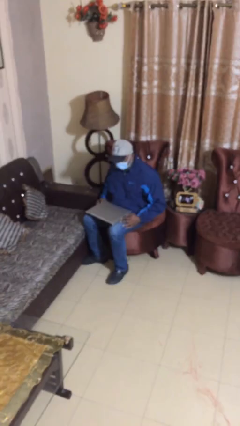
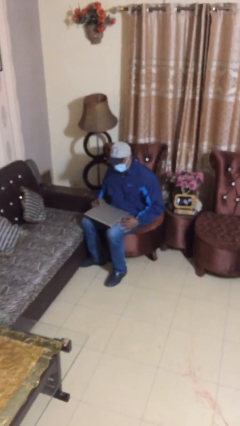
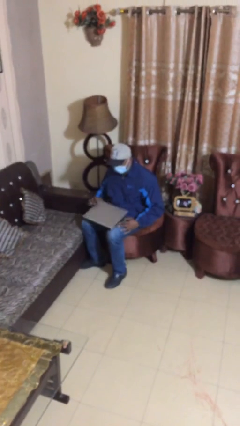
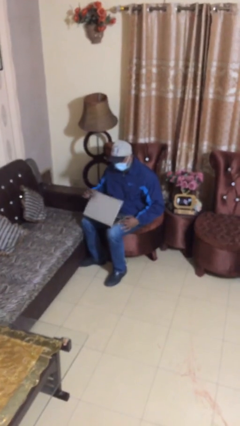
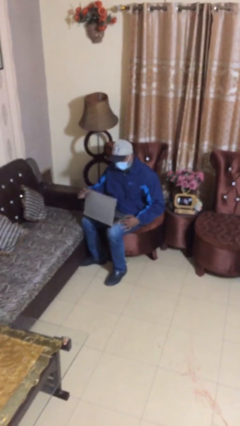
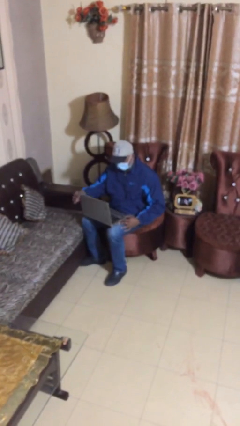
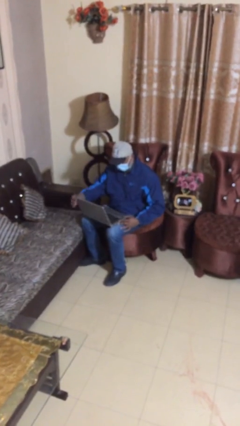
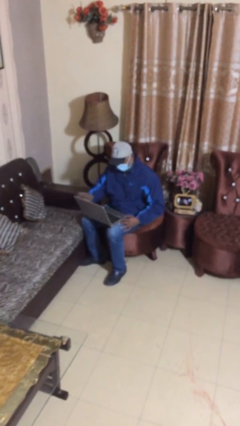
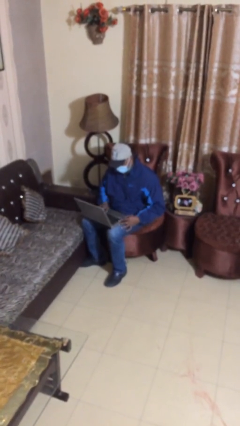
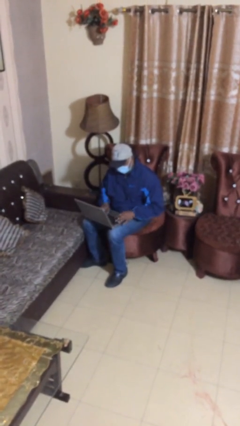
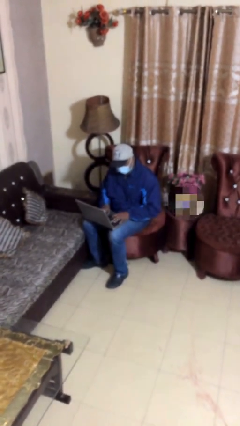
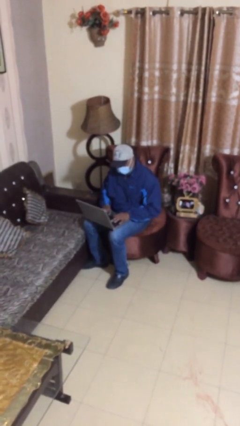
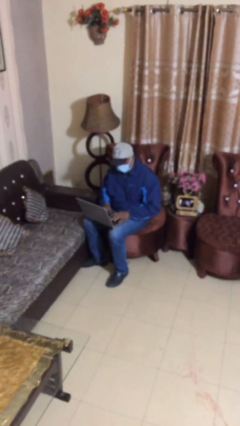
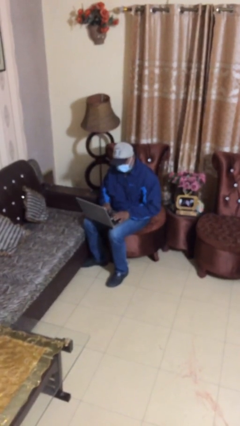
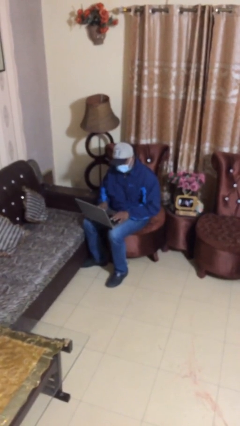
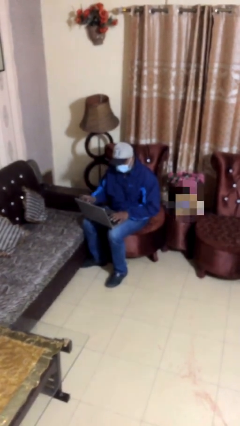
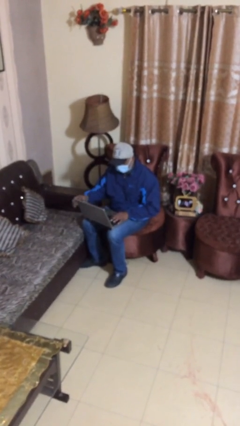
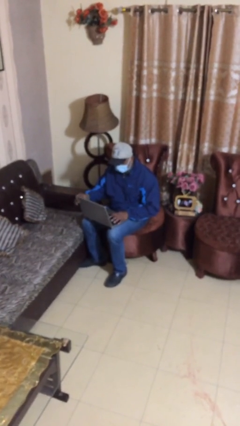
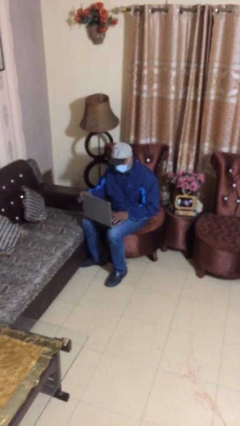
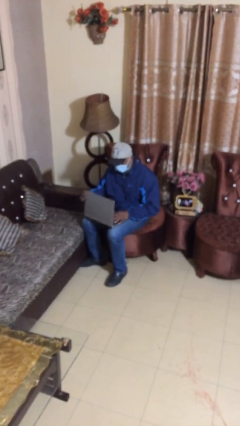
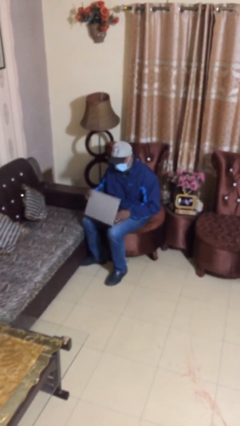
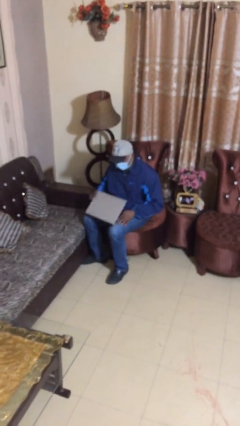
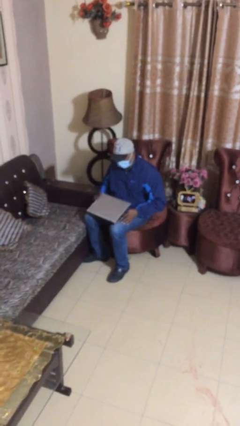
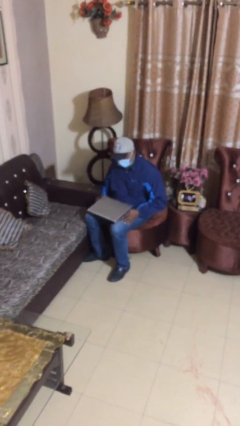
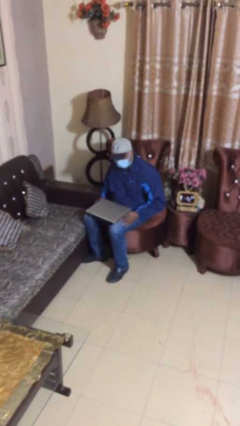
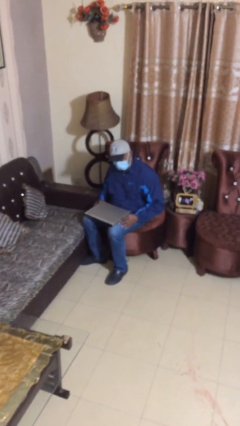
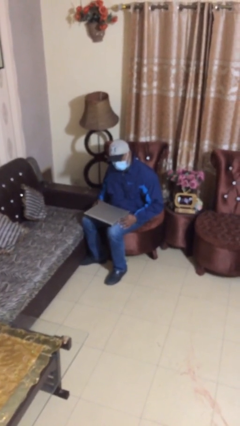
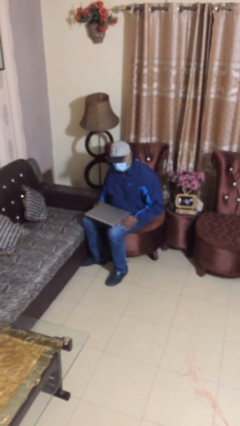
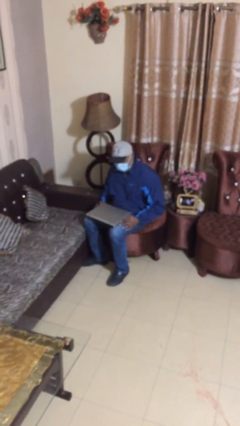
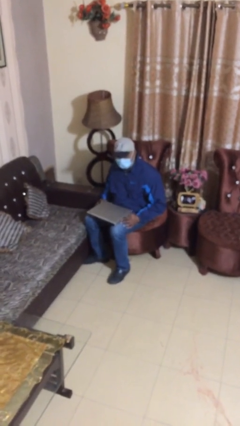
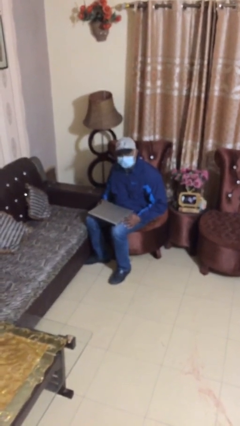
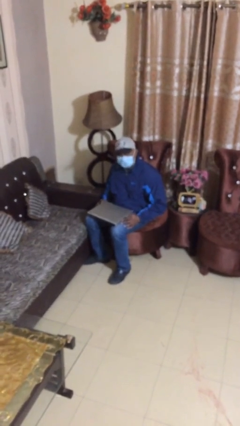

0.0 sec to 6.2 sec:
person interacts with laptop

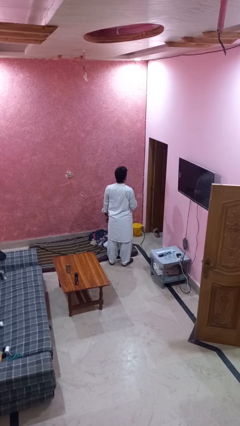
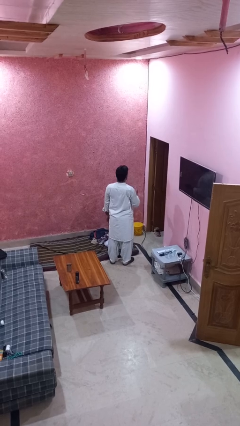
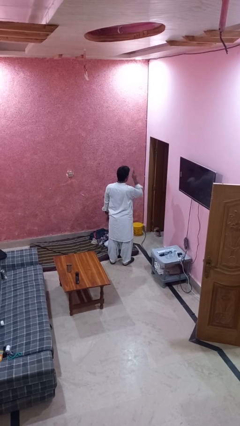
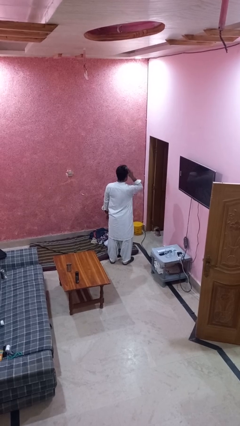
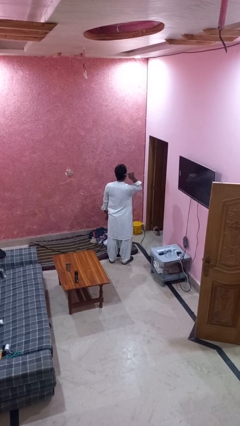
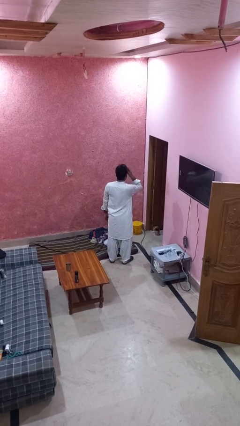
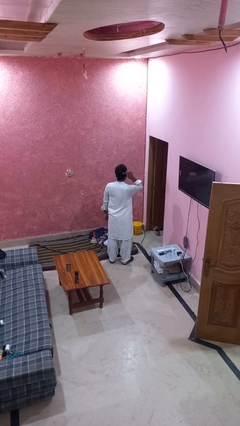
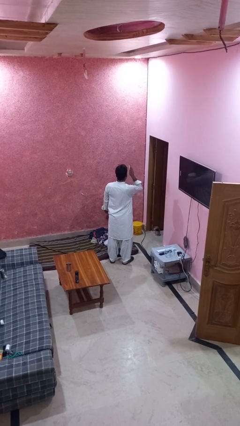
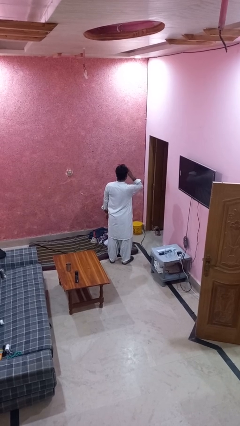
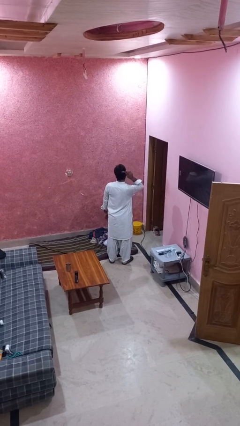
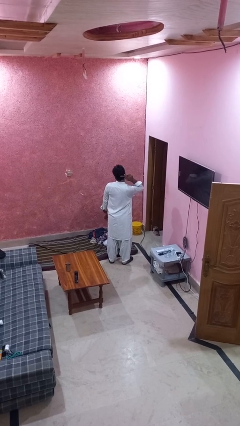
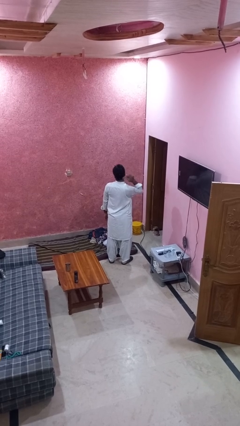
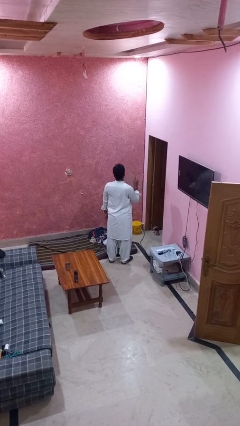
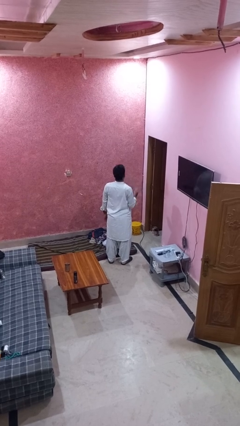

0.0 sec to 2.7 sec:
person brushes hair

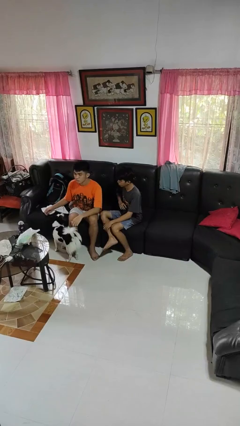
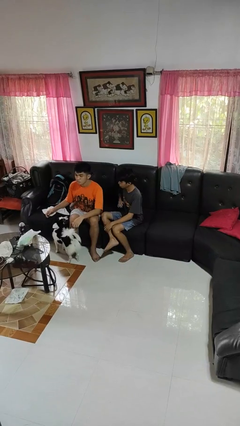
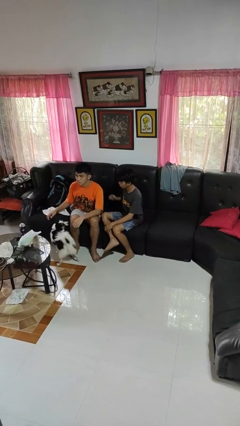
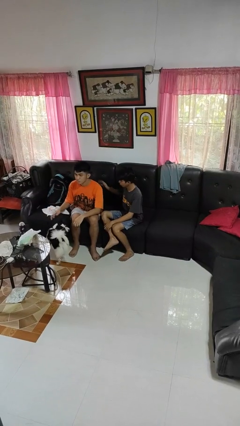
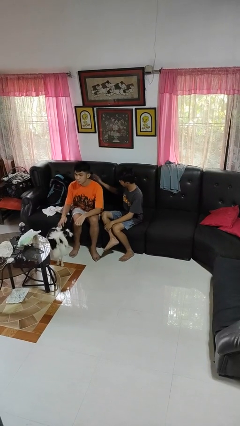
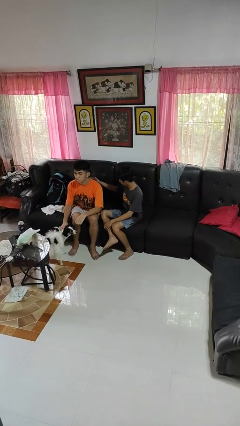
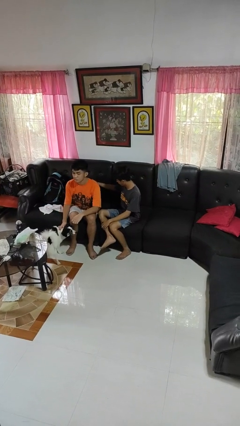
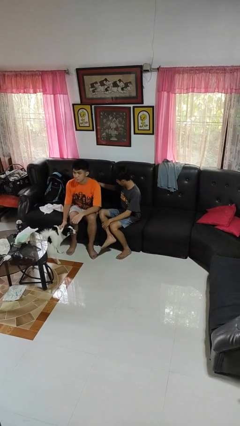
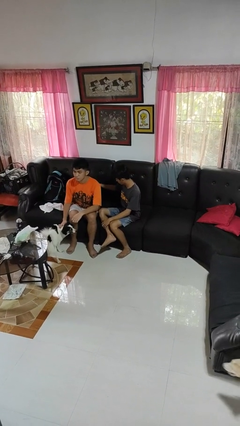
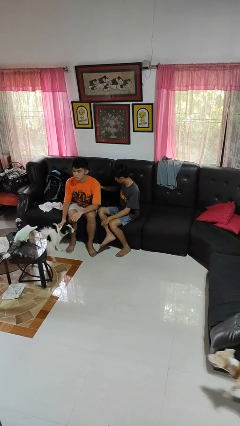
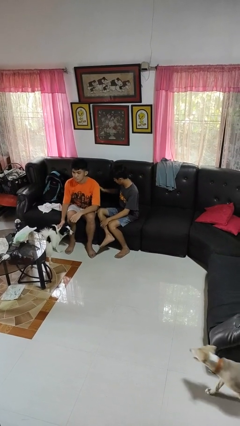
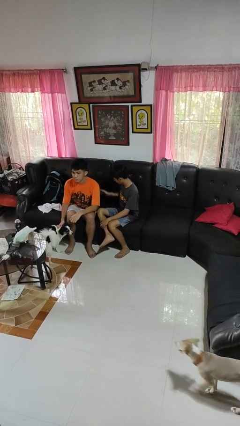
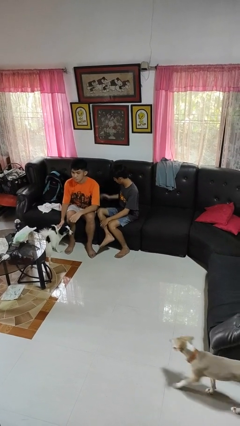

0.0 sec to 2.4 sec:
person touches back of person

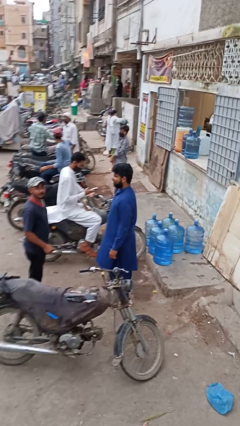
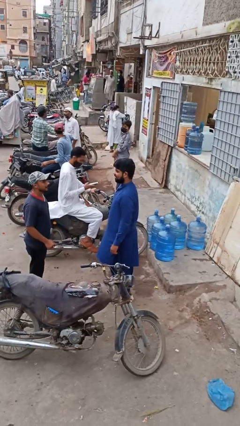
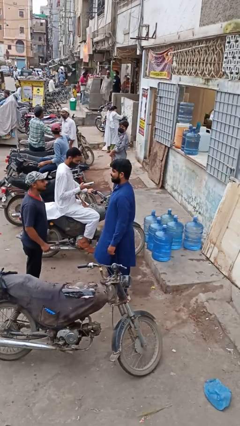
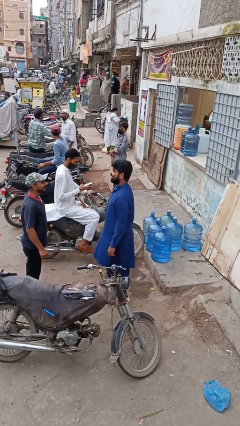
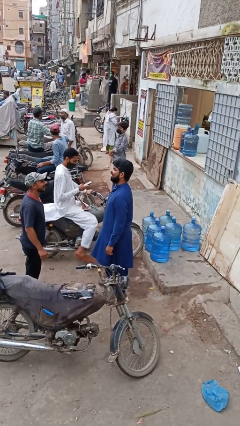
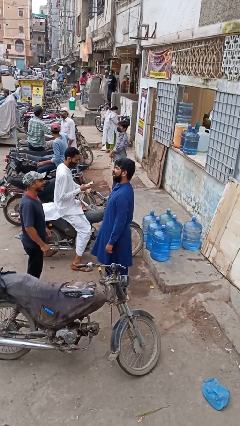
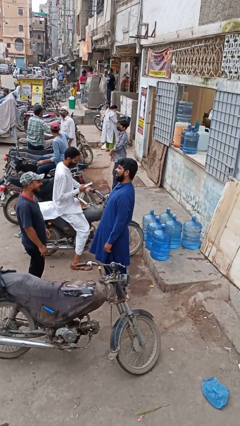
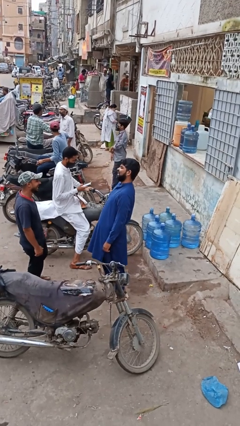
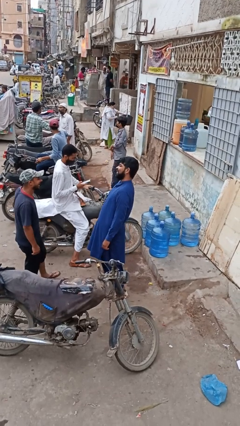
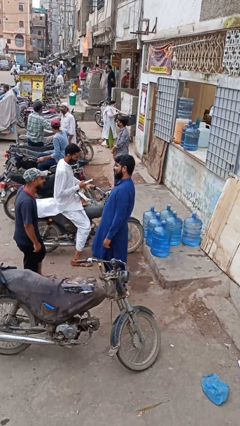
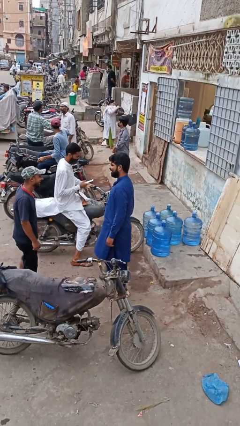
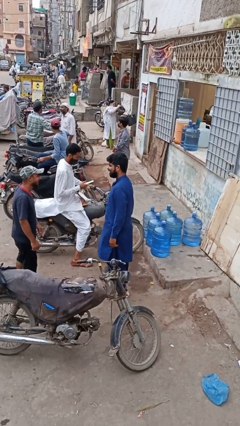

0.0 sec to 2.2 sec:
person laughs with person

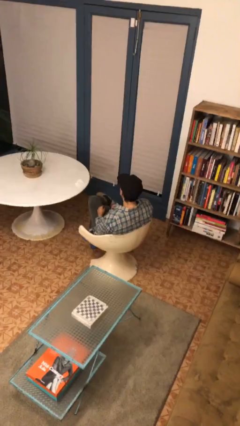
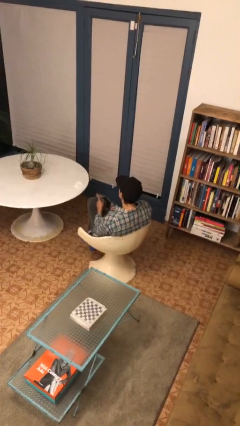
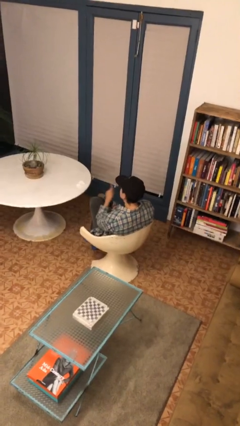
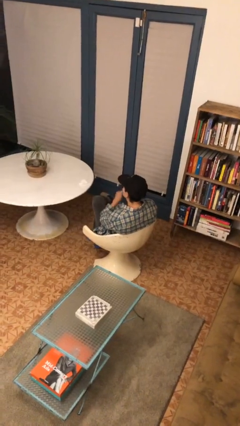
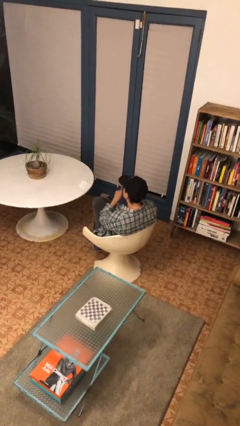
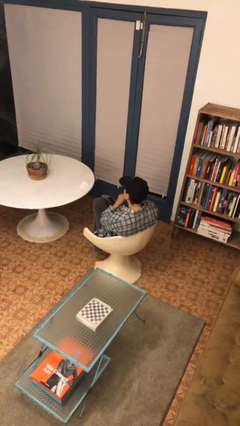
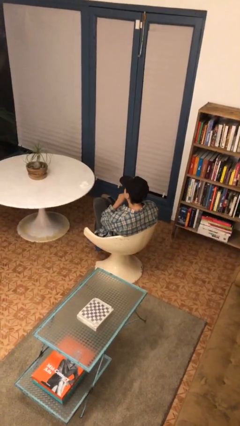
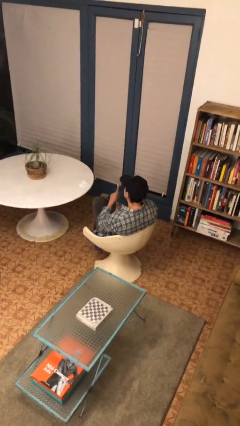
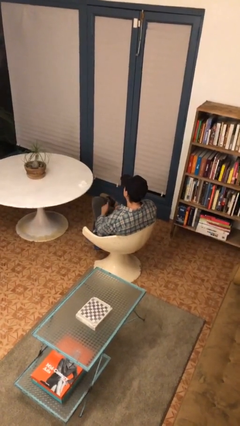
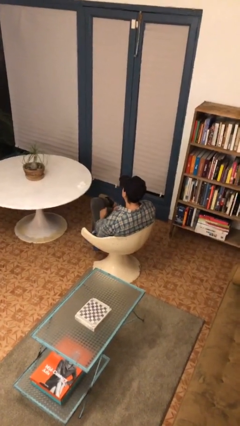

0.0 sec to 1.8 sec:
person gestures be quiet

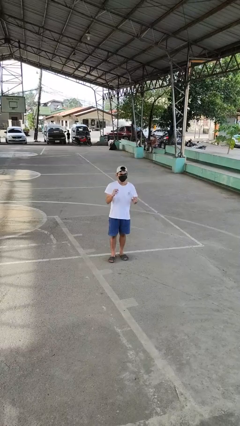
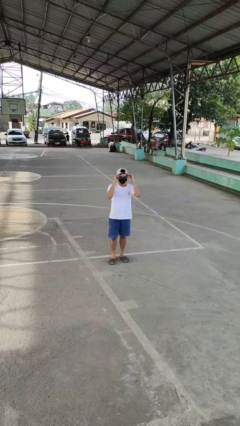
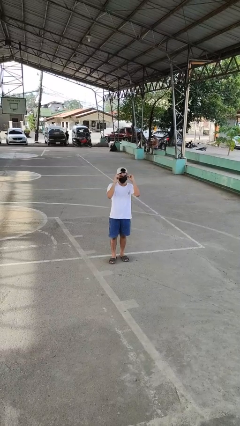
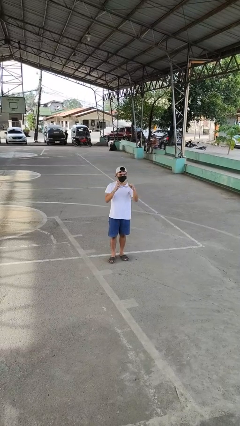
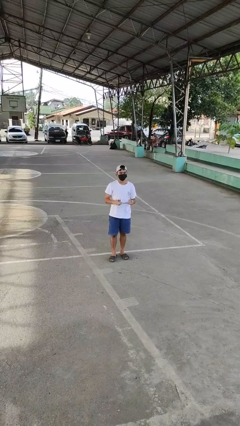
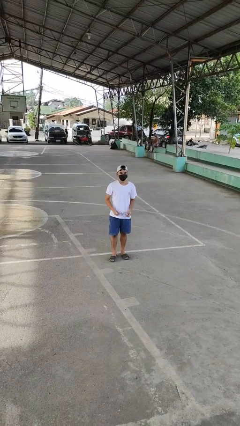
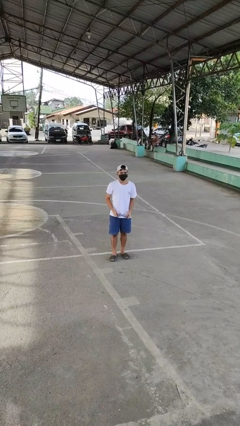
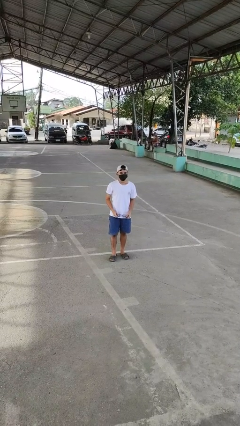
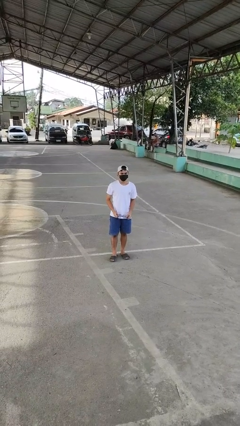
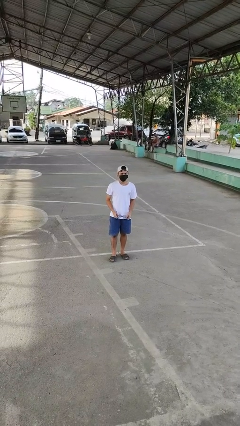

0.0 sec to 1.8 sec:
person takes off glasses

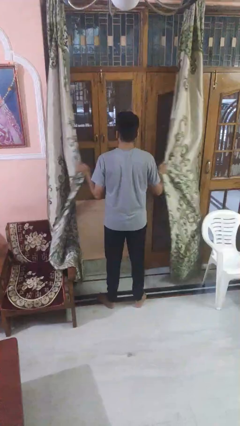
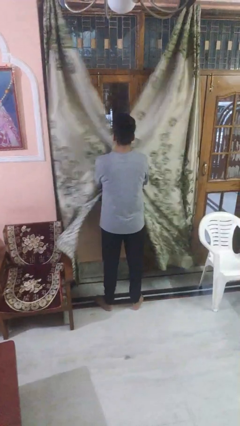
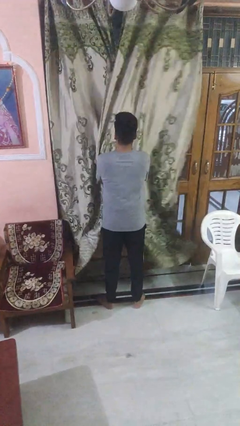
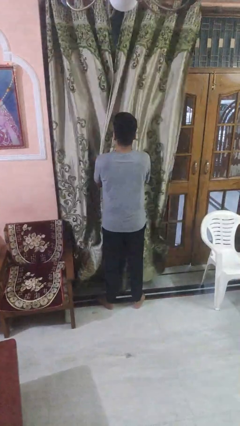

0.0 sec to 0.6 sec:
person closes curtains
